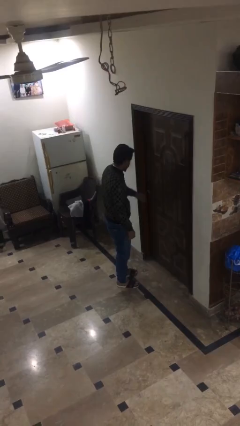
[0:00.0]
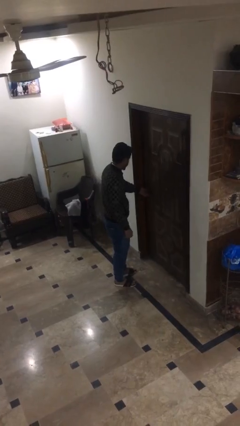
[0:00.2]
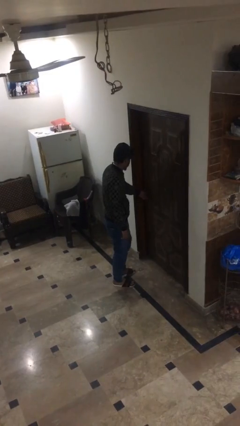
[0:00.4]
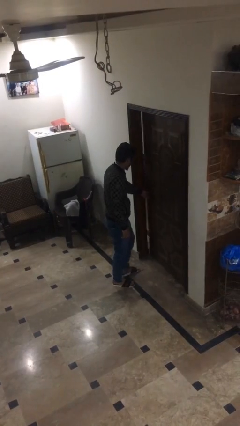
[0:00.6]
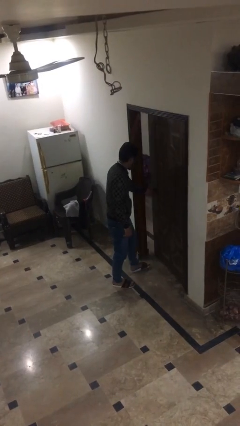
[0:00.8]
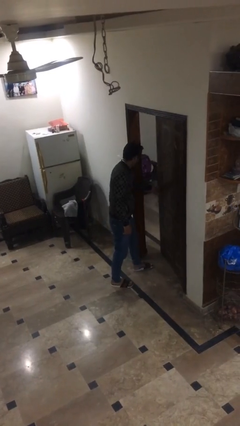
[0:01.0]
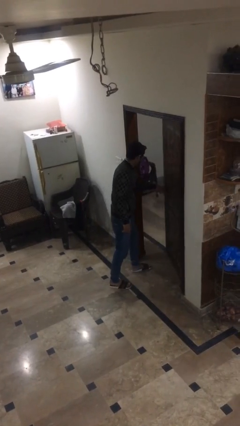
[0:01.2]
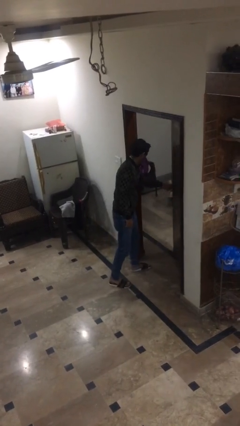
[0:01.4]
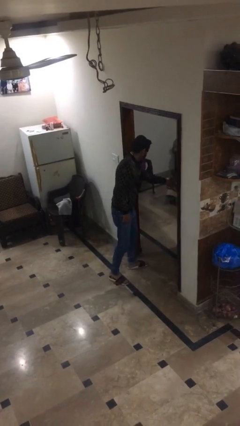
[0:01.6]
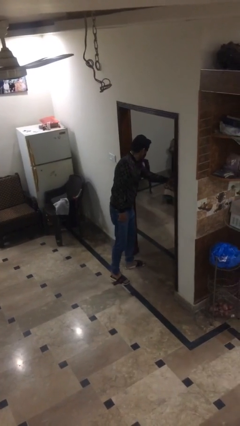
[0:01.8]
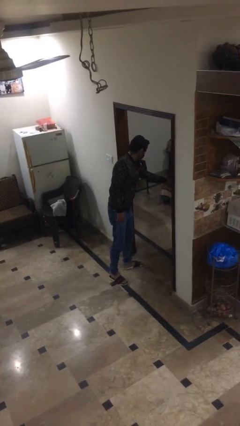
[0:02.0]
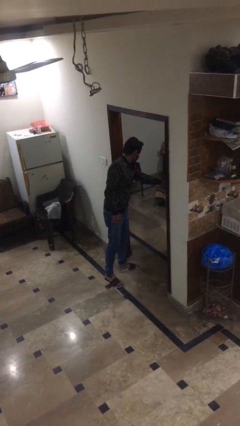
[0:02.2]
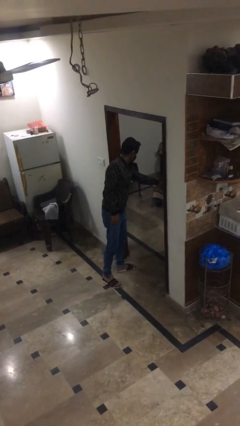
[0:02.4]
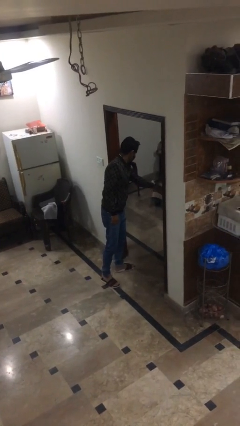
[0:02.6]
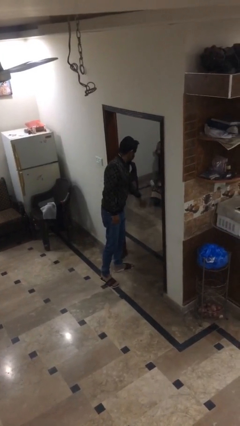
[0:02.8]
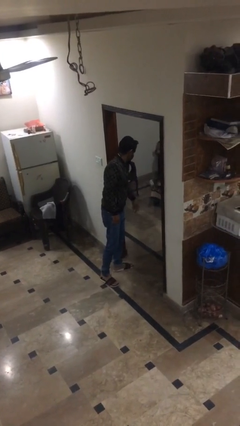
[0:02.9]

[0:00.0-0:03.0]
person opens facility door

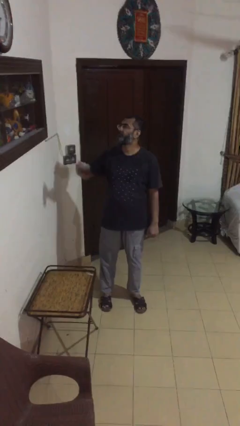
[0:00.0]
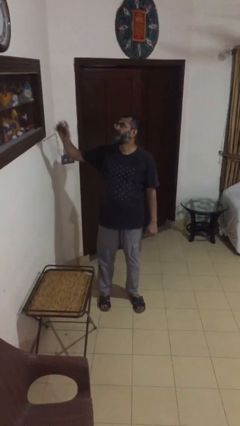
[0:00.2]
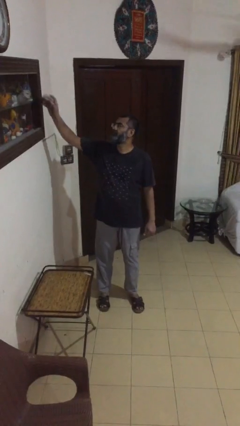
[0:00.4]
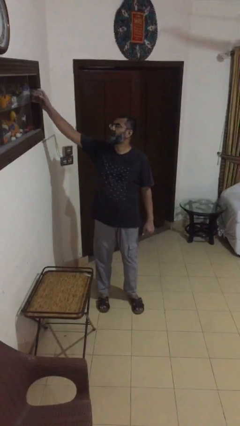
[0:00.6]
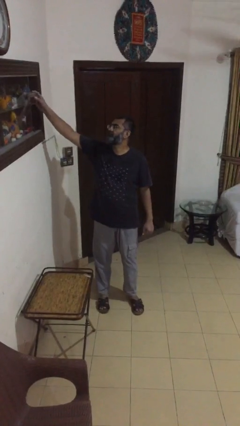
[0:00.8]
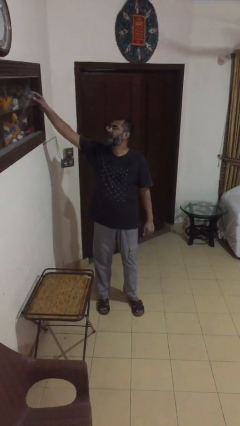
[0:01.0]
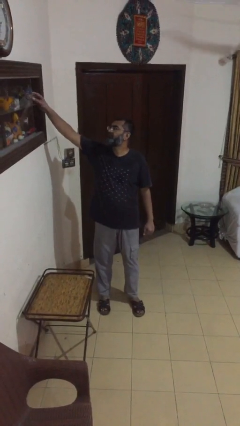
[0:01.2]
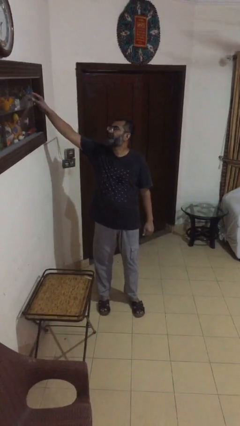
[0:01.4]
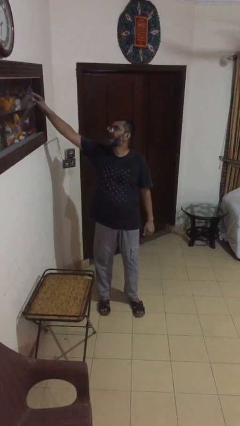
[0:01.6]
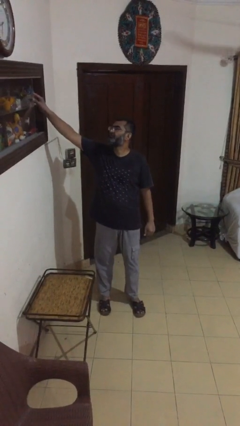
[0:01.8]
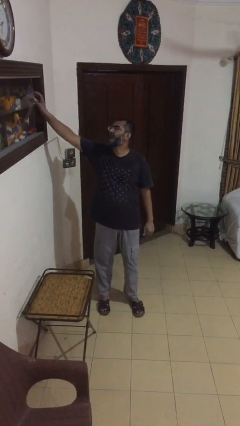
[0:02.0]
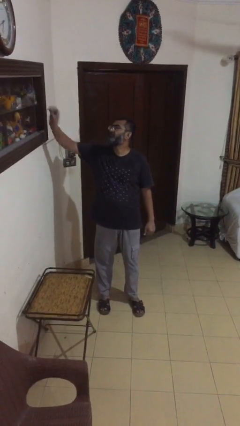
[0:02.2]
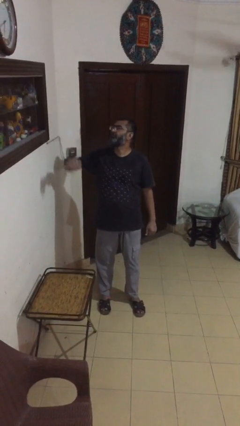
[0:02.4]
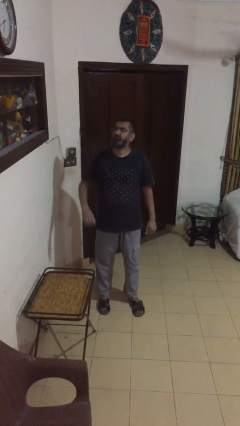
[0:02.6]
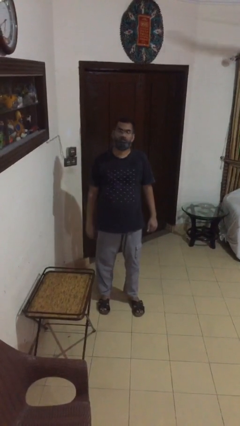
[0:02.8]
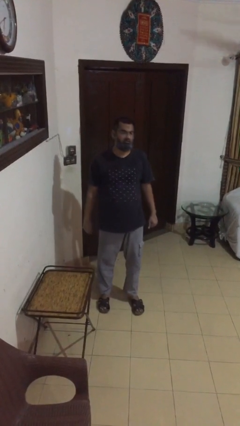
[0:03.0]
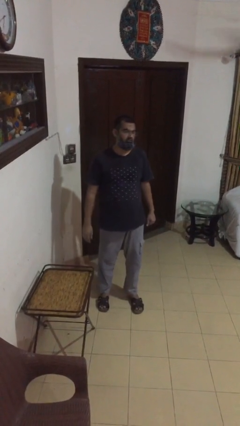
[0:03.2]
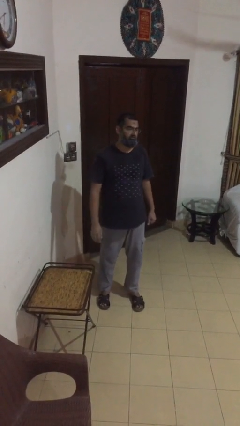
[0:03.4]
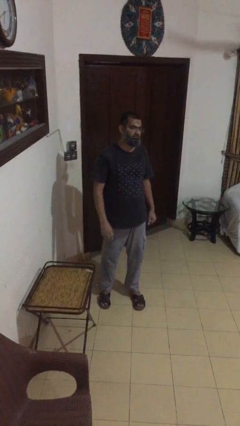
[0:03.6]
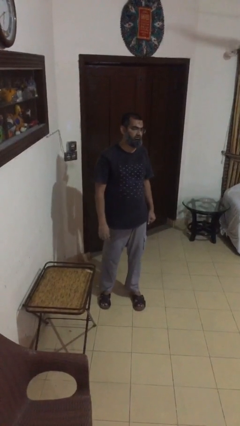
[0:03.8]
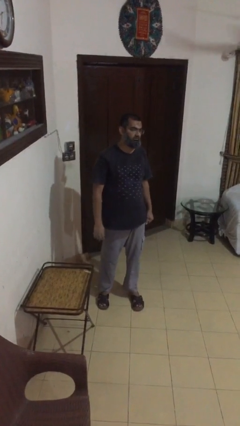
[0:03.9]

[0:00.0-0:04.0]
person puts down object on shelf

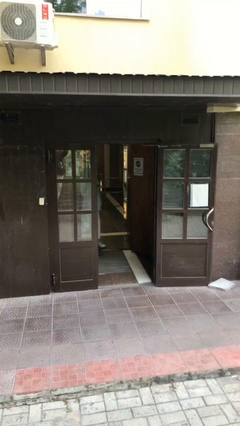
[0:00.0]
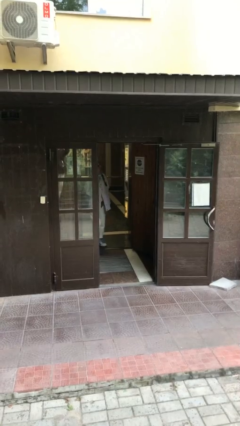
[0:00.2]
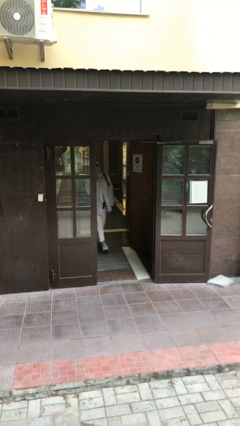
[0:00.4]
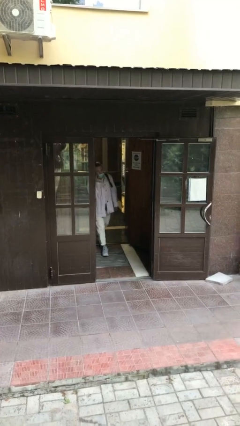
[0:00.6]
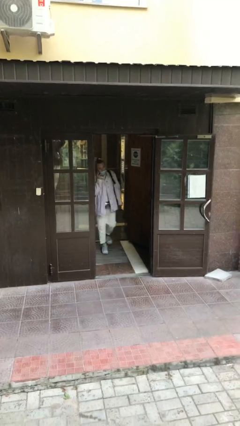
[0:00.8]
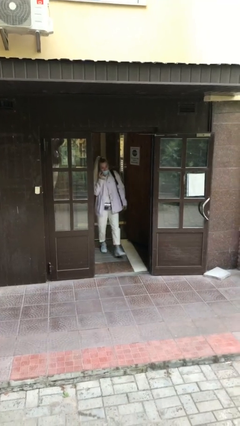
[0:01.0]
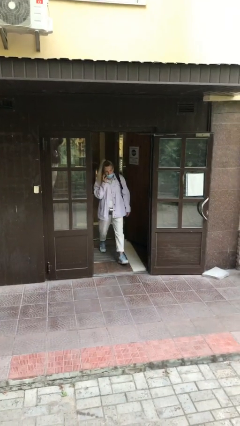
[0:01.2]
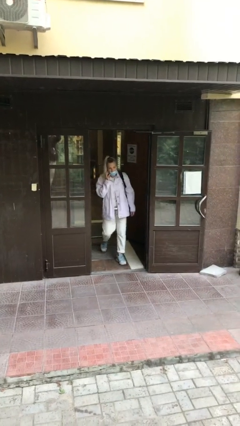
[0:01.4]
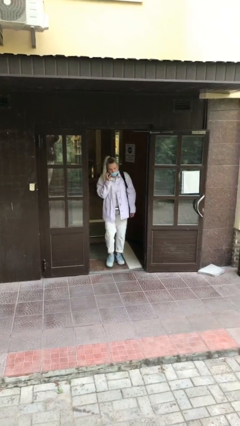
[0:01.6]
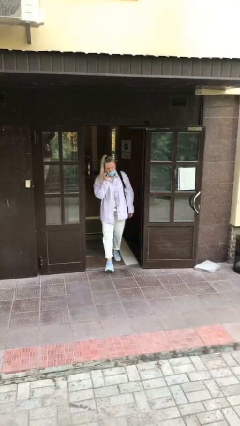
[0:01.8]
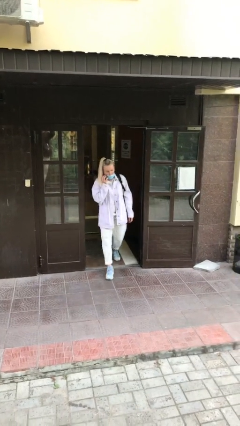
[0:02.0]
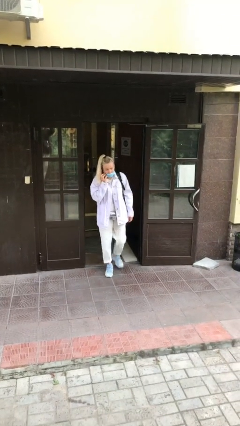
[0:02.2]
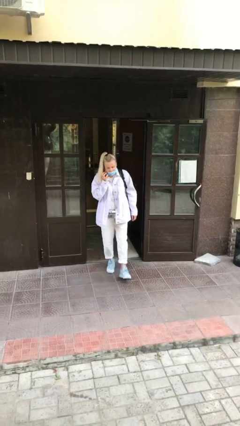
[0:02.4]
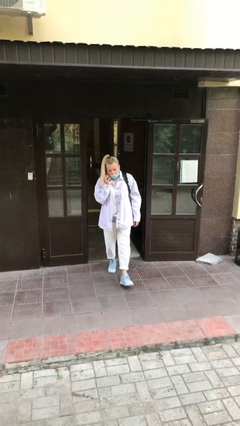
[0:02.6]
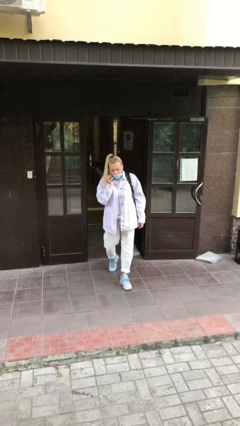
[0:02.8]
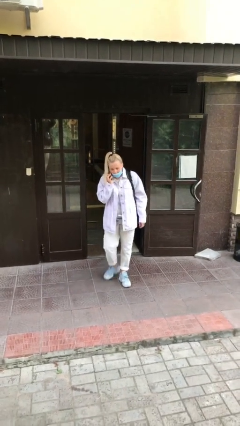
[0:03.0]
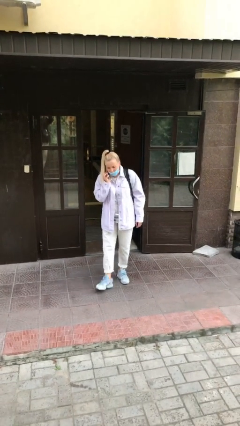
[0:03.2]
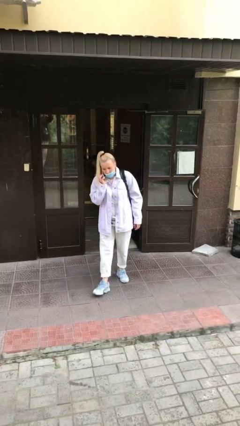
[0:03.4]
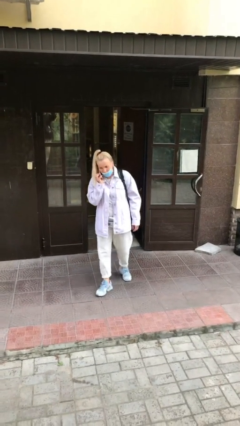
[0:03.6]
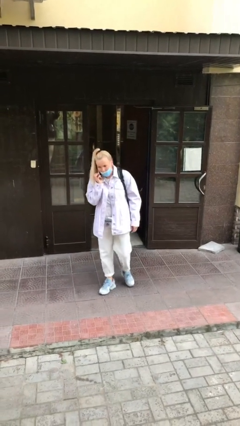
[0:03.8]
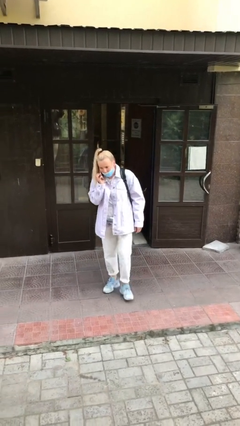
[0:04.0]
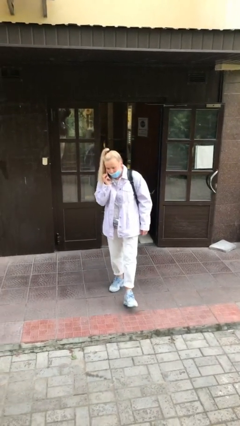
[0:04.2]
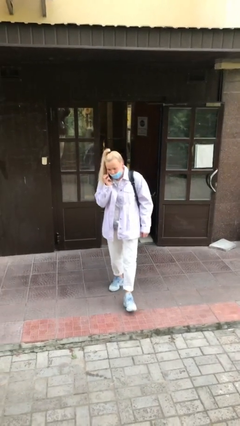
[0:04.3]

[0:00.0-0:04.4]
person enters scene through structure

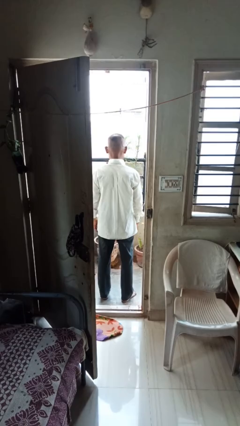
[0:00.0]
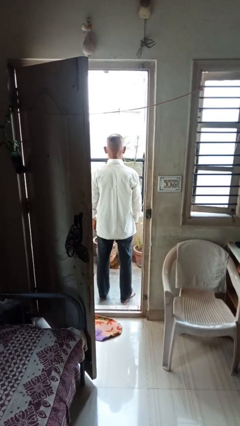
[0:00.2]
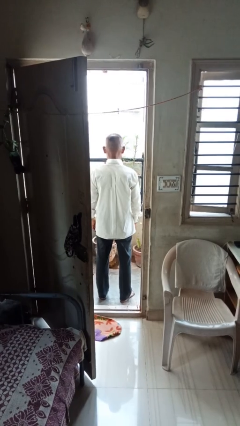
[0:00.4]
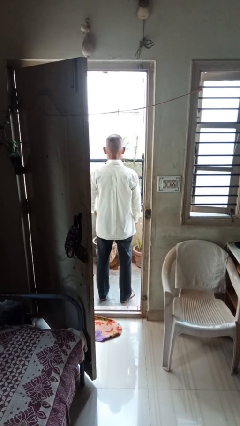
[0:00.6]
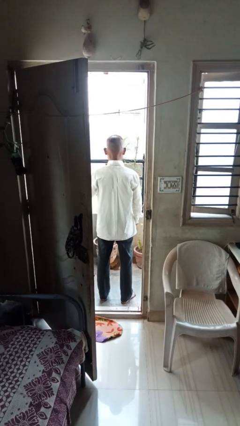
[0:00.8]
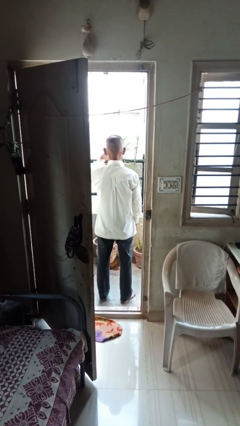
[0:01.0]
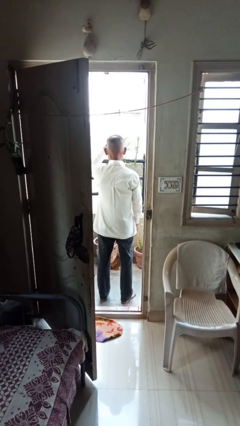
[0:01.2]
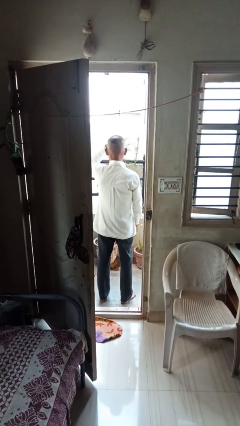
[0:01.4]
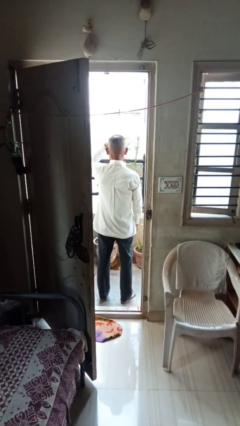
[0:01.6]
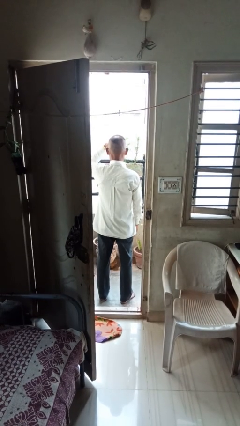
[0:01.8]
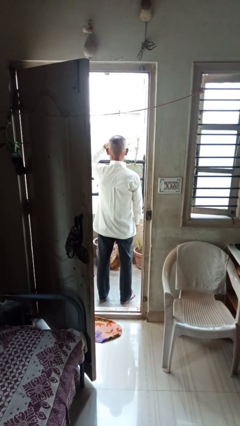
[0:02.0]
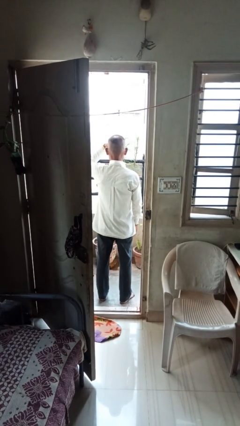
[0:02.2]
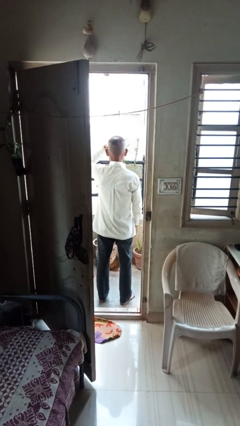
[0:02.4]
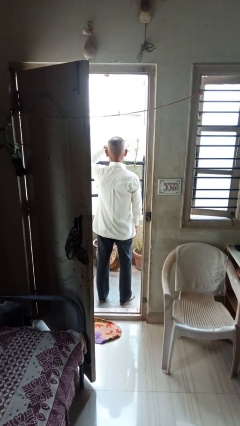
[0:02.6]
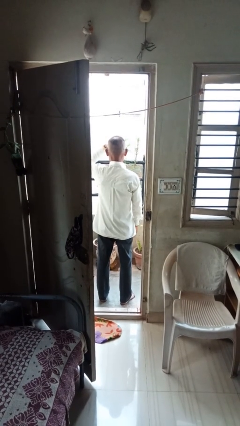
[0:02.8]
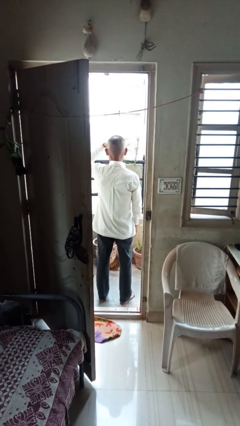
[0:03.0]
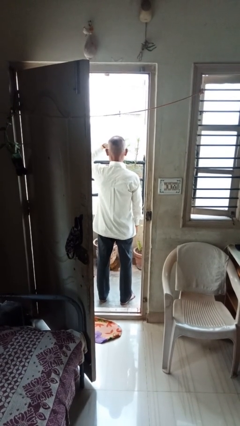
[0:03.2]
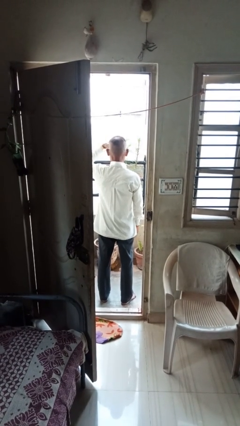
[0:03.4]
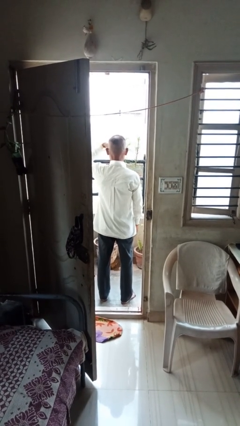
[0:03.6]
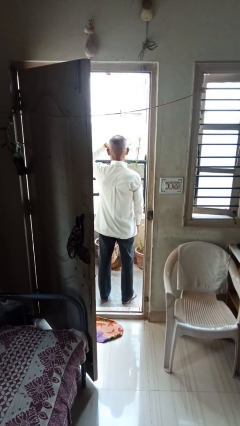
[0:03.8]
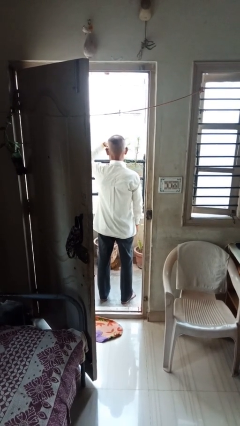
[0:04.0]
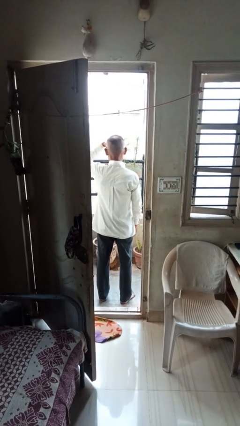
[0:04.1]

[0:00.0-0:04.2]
person shades eyes

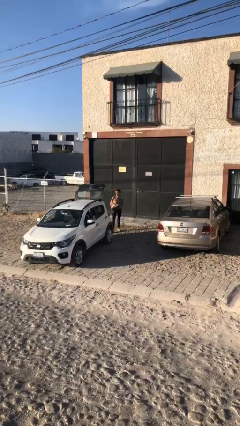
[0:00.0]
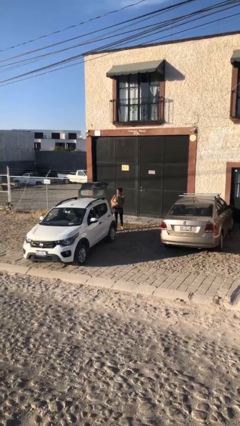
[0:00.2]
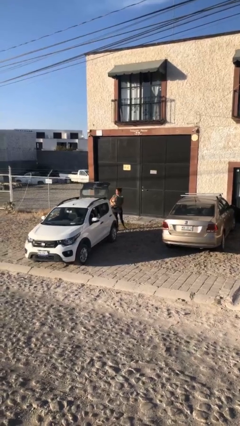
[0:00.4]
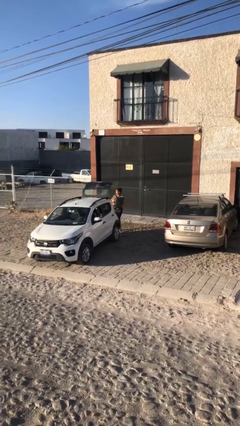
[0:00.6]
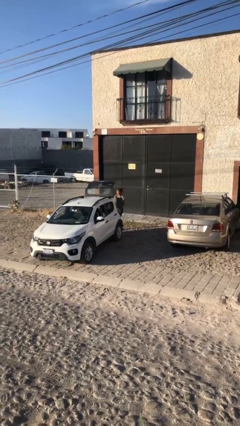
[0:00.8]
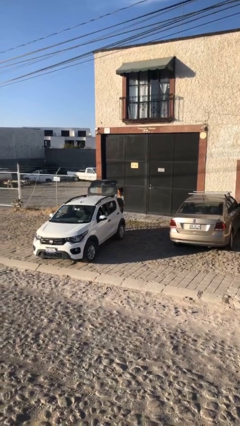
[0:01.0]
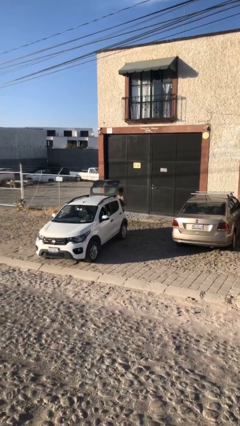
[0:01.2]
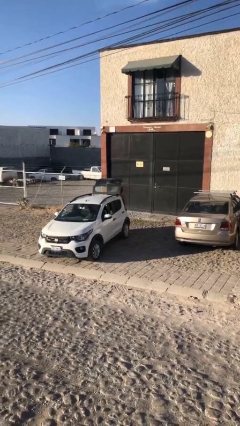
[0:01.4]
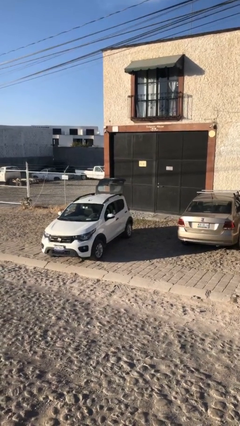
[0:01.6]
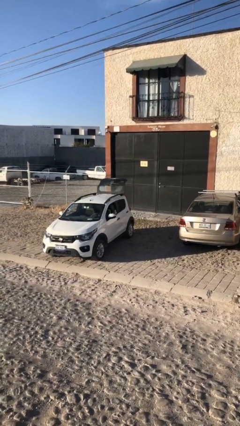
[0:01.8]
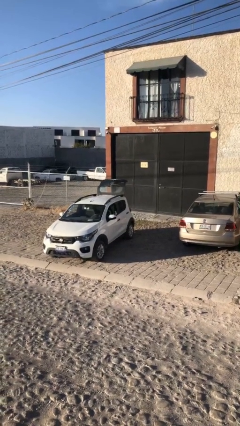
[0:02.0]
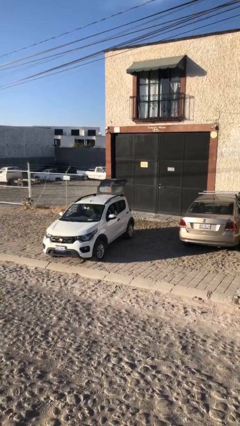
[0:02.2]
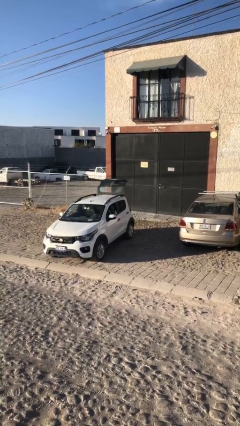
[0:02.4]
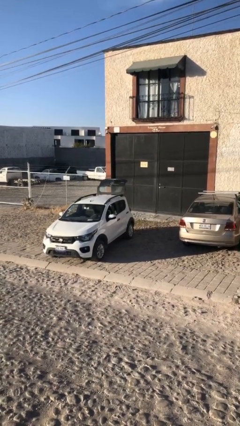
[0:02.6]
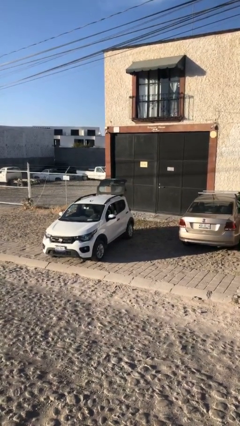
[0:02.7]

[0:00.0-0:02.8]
person loads car
